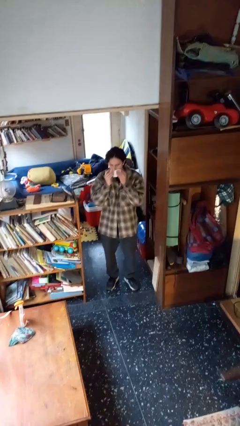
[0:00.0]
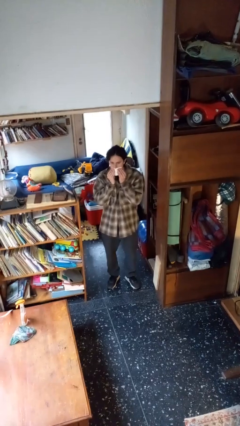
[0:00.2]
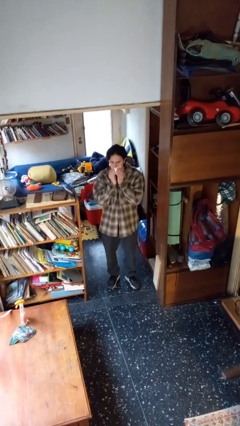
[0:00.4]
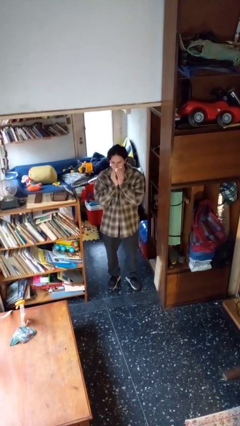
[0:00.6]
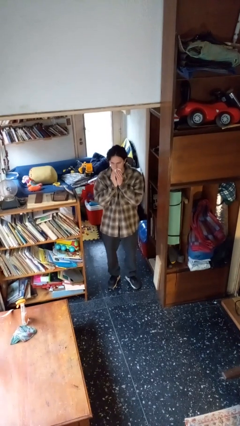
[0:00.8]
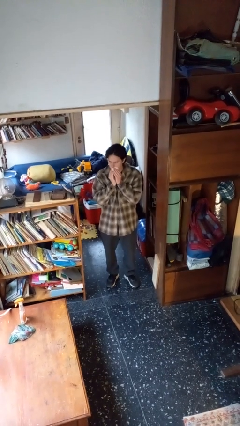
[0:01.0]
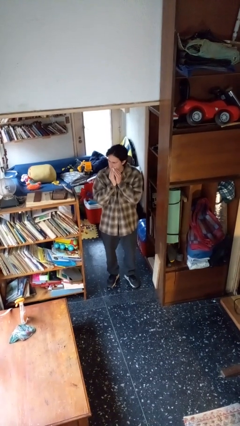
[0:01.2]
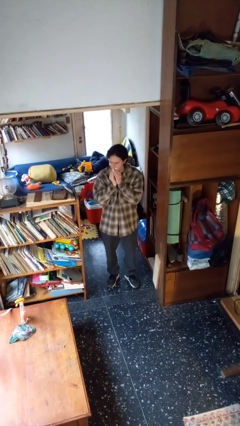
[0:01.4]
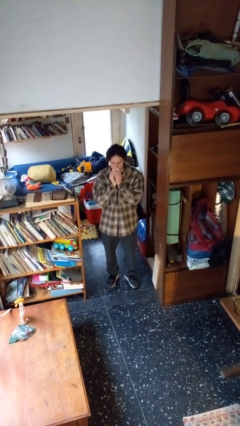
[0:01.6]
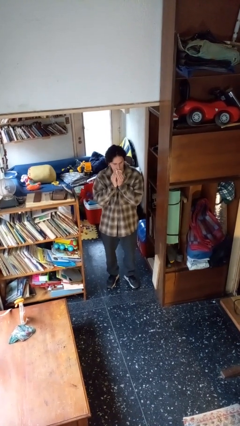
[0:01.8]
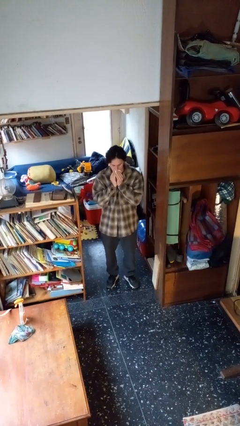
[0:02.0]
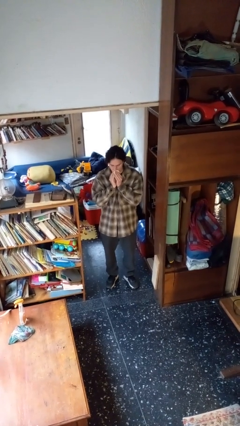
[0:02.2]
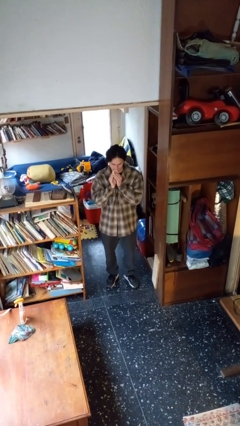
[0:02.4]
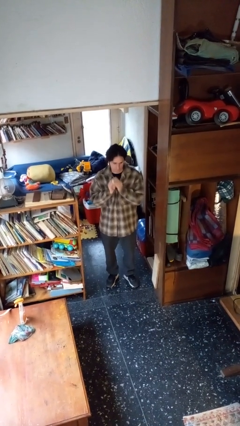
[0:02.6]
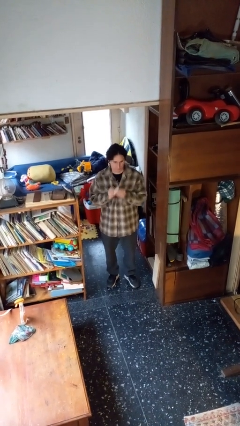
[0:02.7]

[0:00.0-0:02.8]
person wipes mouth with napkin

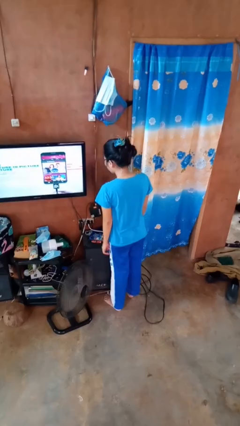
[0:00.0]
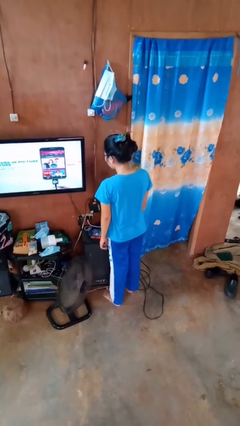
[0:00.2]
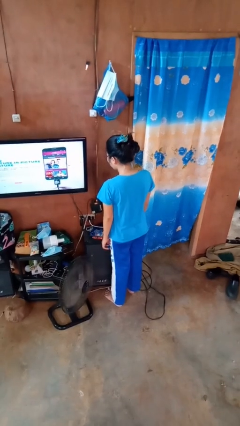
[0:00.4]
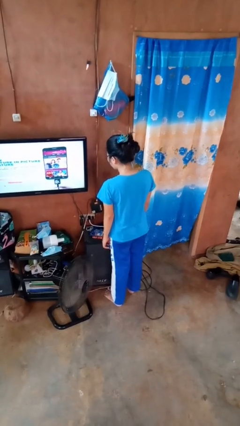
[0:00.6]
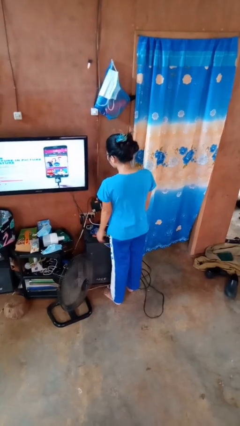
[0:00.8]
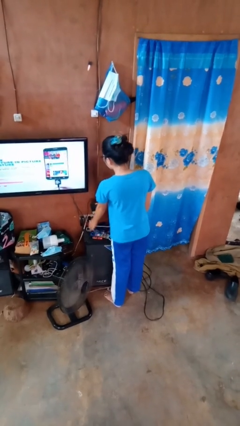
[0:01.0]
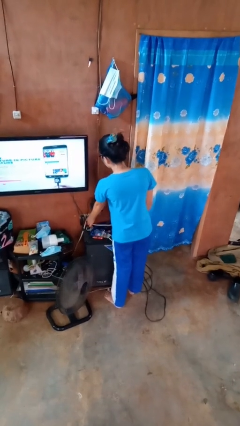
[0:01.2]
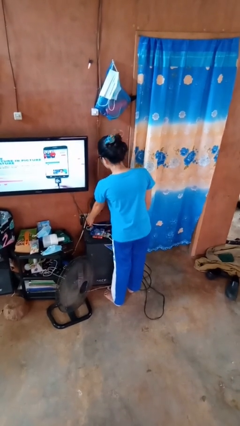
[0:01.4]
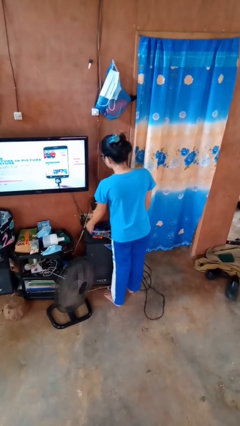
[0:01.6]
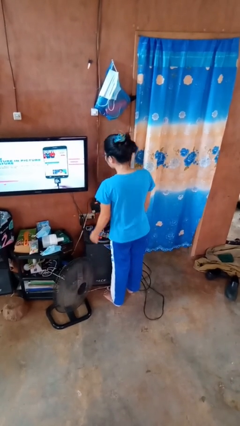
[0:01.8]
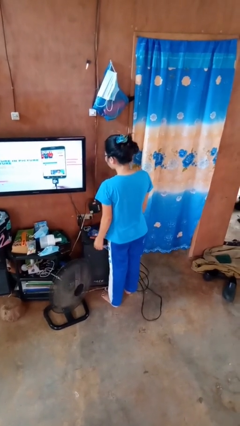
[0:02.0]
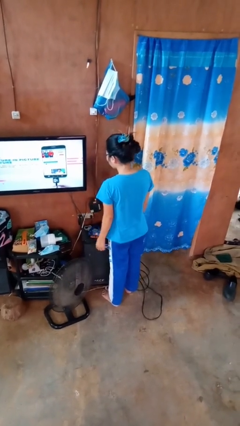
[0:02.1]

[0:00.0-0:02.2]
person unplugs from electrical socket

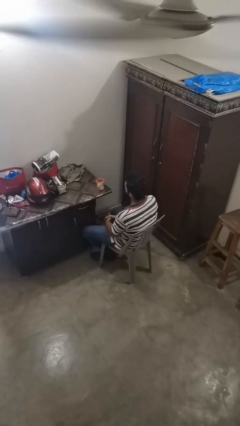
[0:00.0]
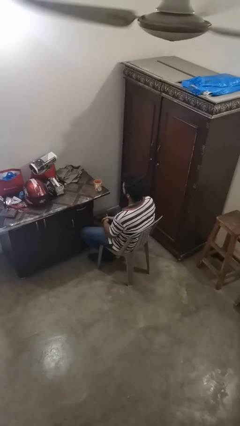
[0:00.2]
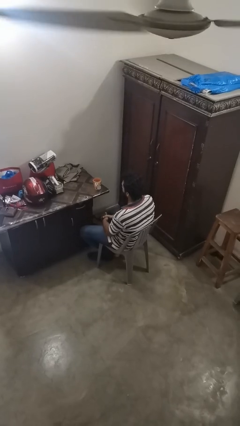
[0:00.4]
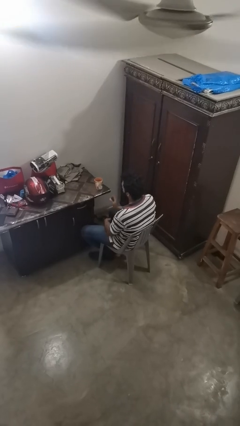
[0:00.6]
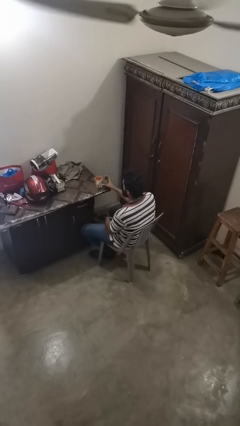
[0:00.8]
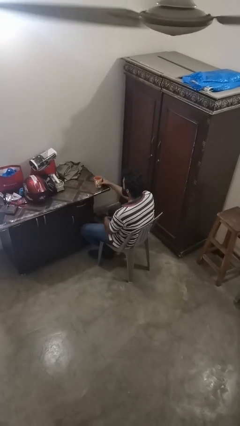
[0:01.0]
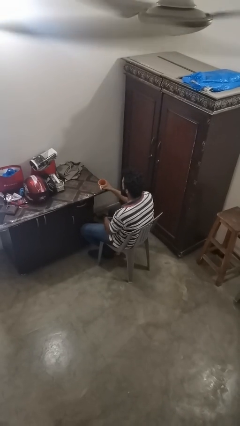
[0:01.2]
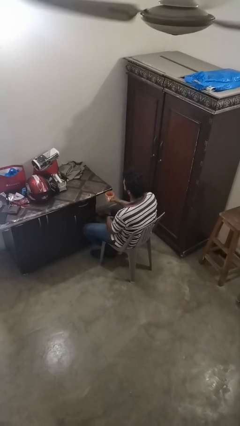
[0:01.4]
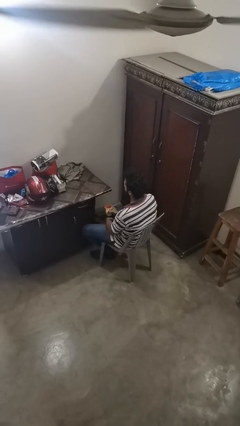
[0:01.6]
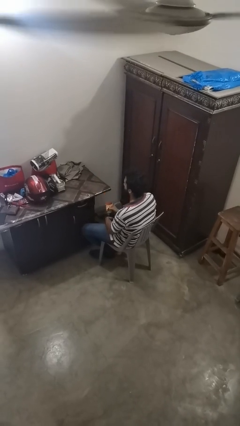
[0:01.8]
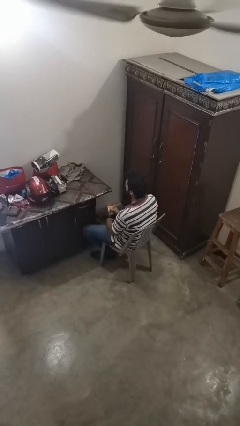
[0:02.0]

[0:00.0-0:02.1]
person picks up object from table

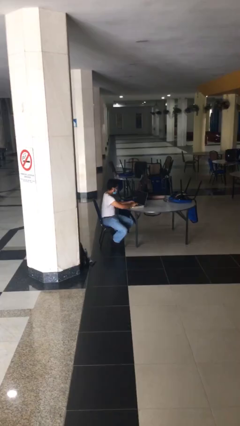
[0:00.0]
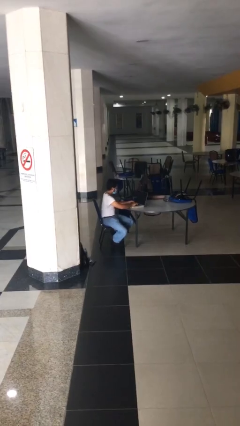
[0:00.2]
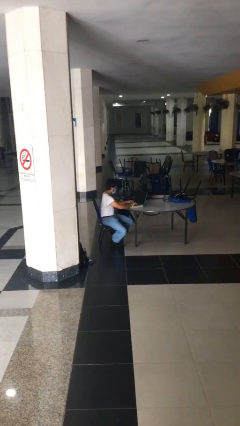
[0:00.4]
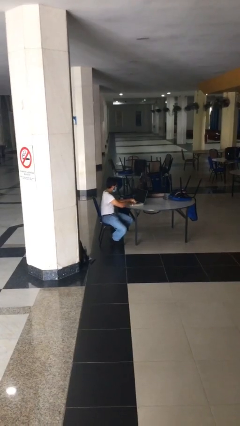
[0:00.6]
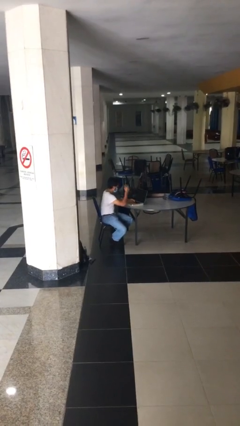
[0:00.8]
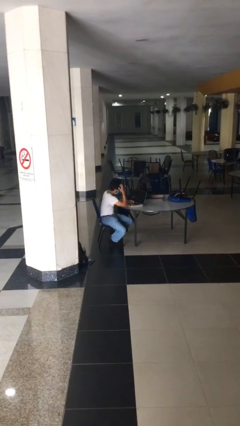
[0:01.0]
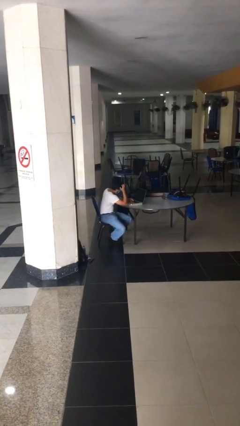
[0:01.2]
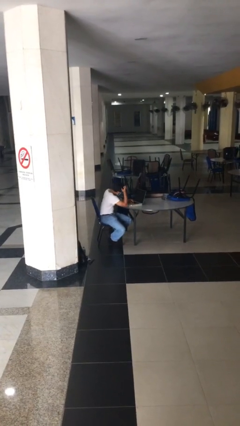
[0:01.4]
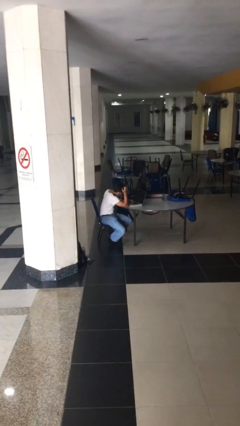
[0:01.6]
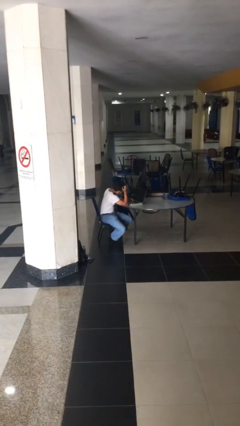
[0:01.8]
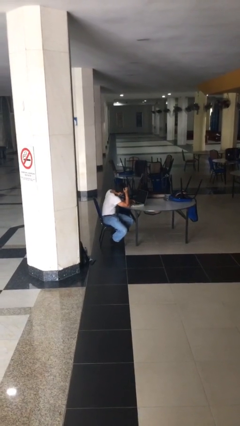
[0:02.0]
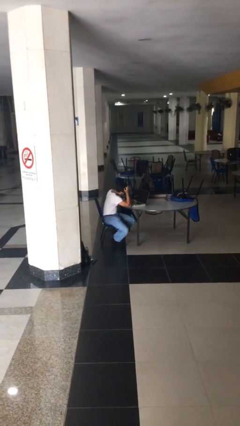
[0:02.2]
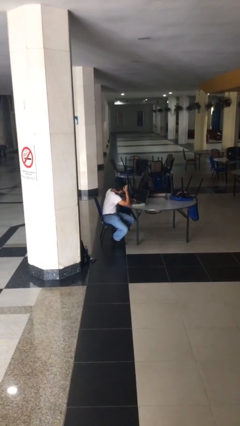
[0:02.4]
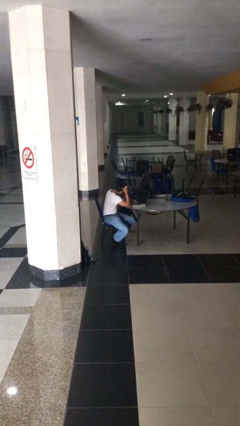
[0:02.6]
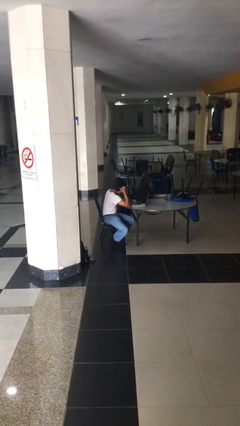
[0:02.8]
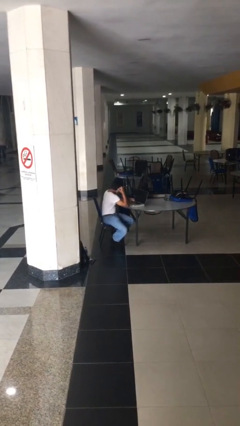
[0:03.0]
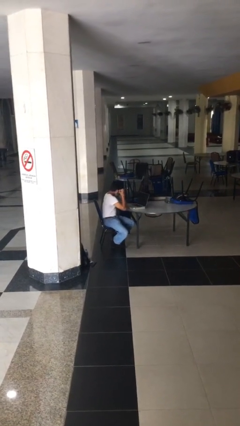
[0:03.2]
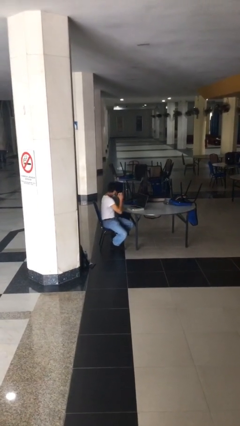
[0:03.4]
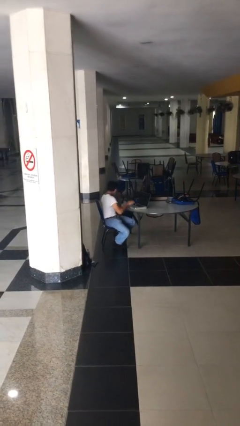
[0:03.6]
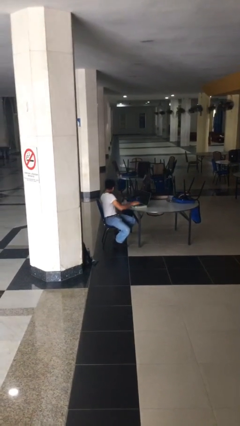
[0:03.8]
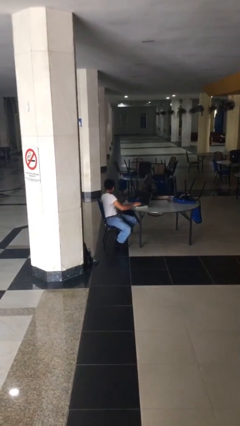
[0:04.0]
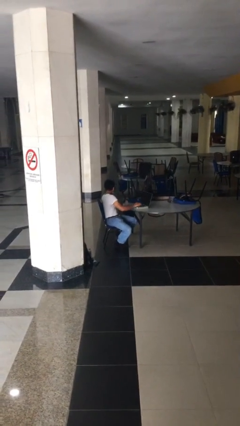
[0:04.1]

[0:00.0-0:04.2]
person interacts with laptop

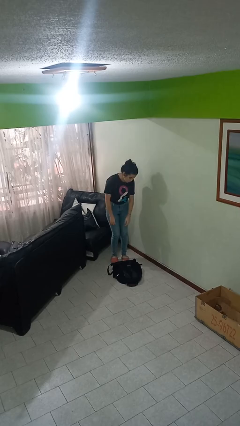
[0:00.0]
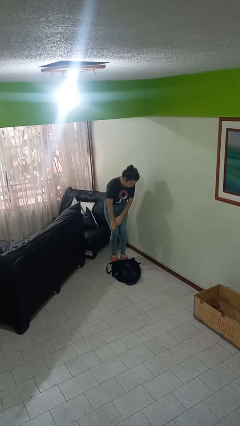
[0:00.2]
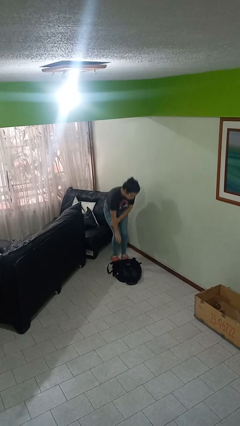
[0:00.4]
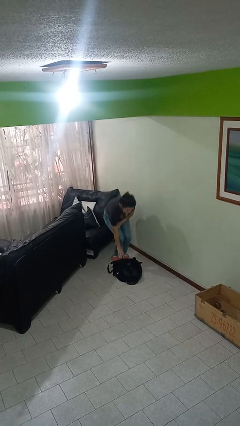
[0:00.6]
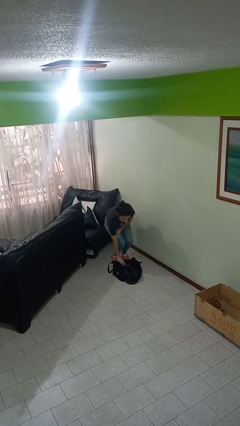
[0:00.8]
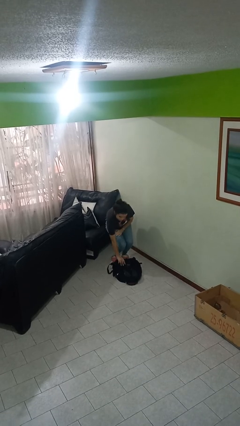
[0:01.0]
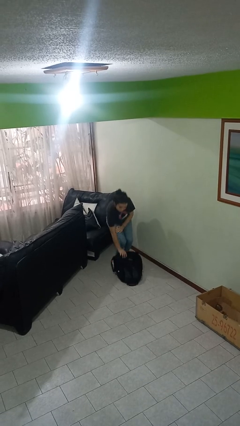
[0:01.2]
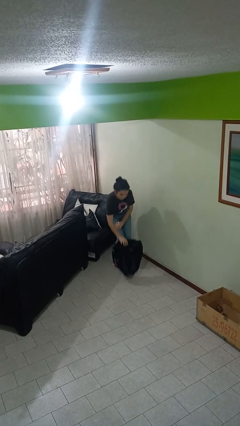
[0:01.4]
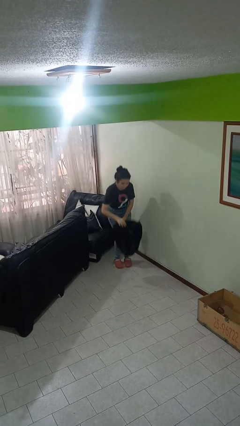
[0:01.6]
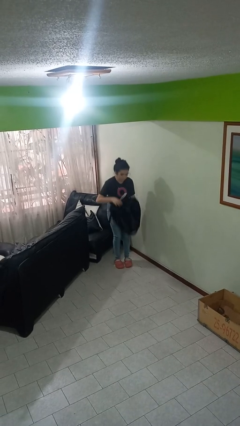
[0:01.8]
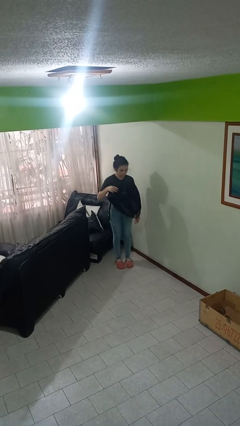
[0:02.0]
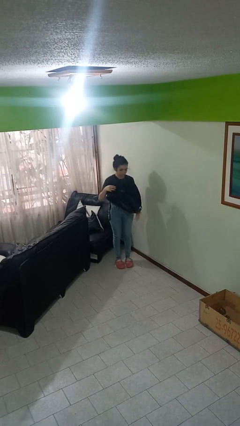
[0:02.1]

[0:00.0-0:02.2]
person picks up object from floor

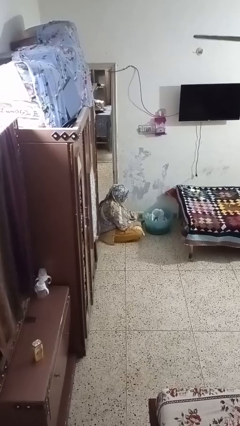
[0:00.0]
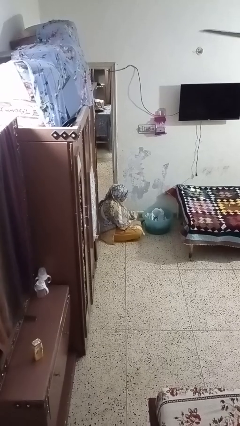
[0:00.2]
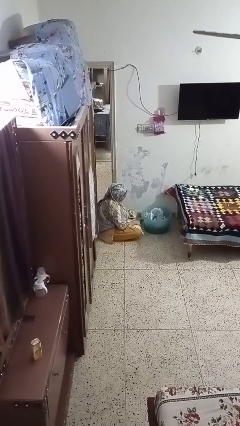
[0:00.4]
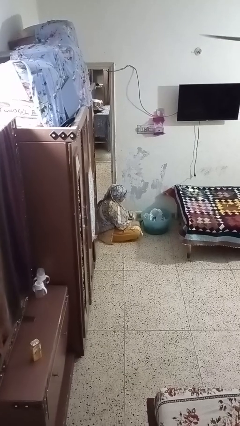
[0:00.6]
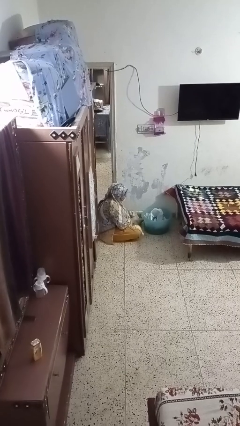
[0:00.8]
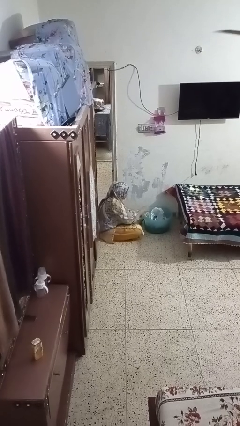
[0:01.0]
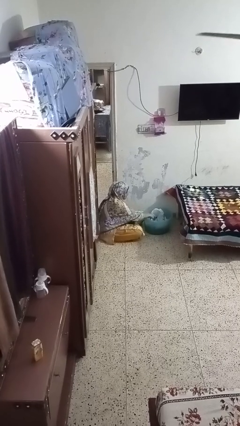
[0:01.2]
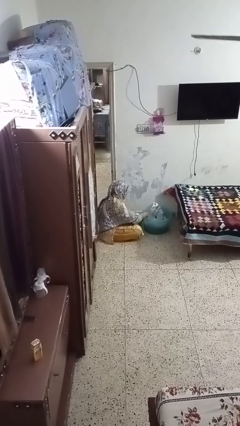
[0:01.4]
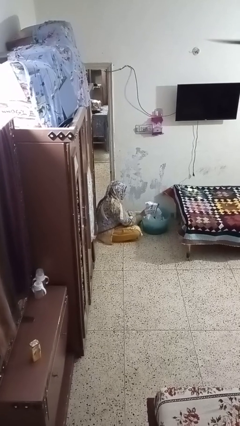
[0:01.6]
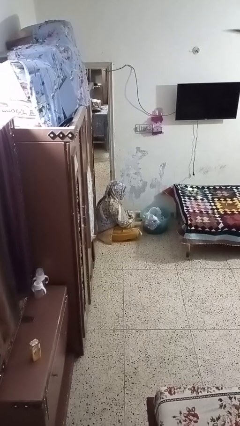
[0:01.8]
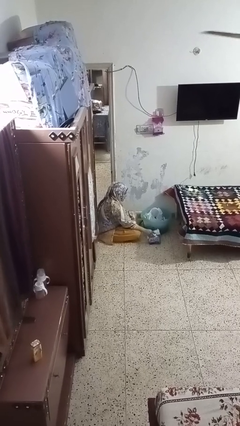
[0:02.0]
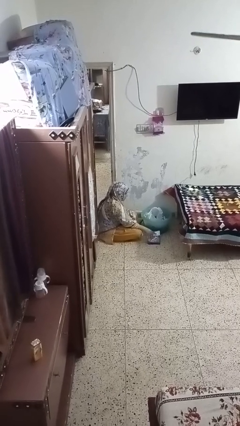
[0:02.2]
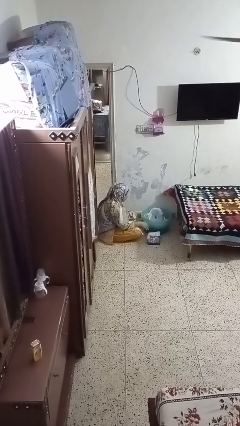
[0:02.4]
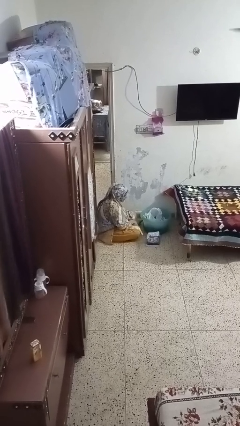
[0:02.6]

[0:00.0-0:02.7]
person takes object from basket

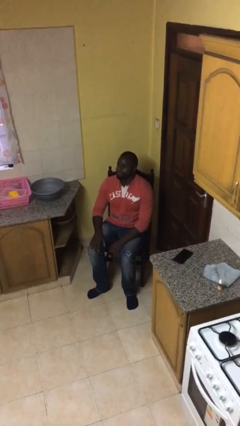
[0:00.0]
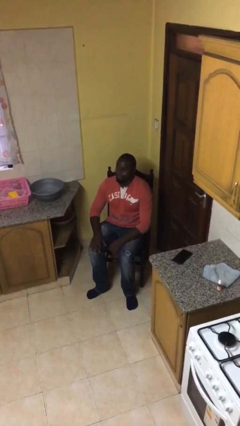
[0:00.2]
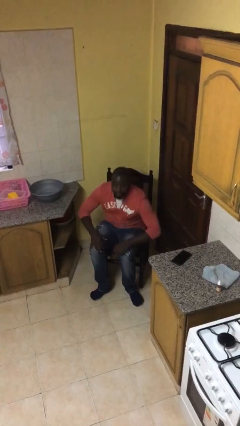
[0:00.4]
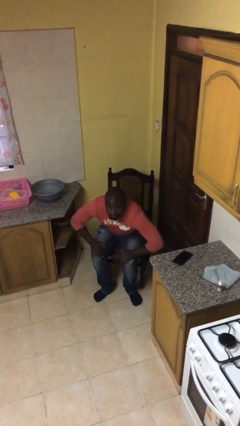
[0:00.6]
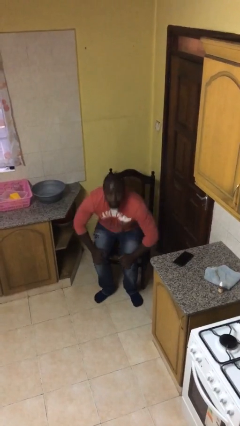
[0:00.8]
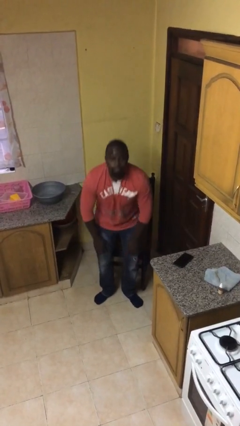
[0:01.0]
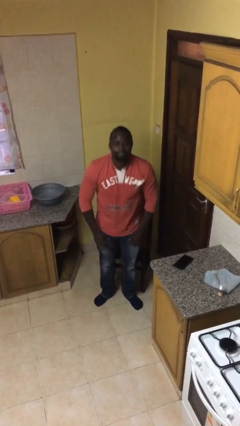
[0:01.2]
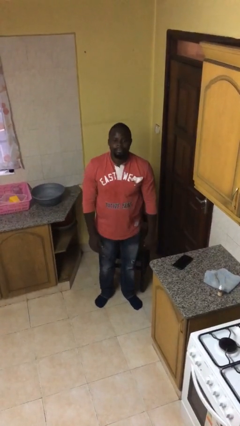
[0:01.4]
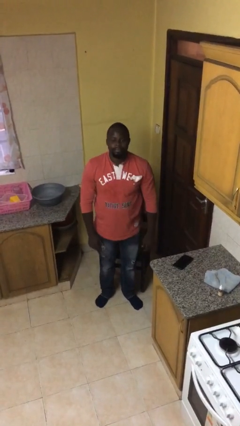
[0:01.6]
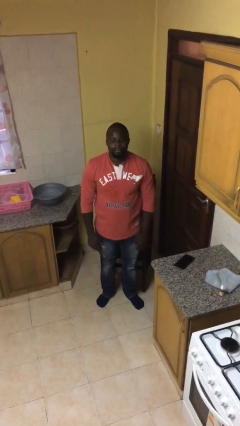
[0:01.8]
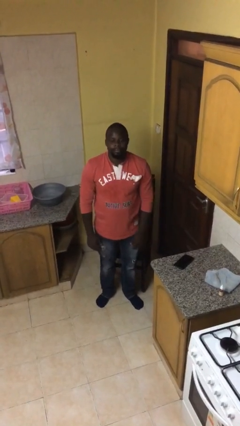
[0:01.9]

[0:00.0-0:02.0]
person stands up
